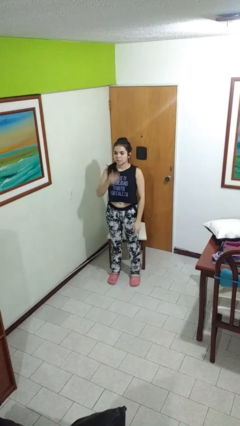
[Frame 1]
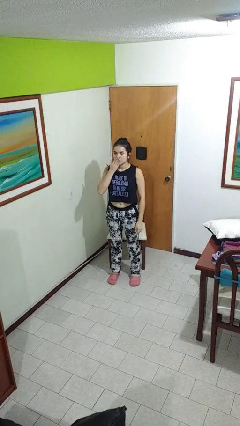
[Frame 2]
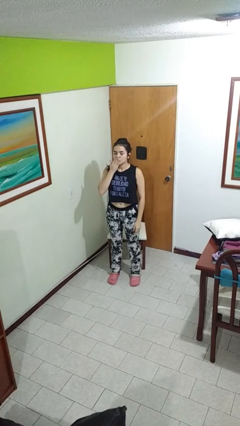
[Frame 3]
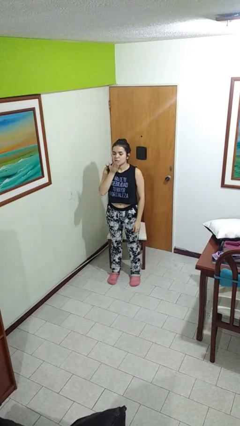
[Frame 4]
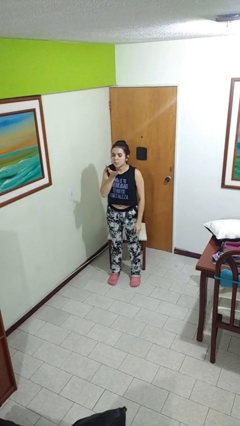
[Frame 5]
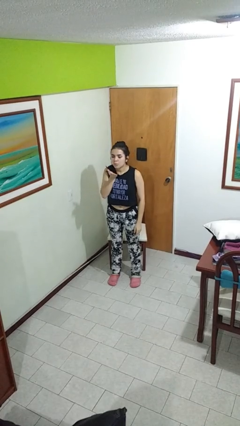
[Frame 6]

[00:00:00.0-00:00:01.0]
person gestures blow kiss

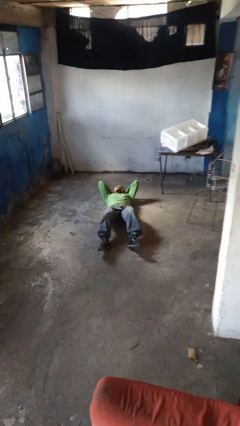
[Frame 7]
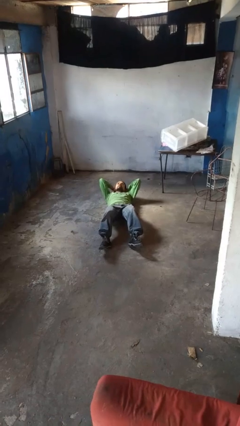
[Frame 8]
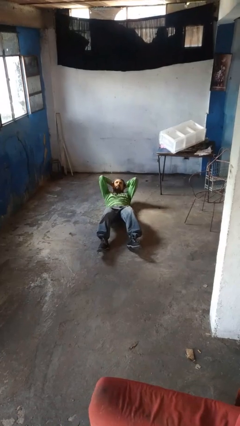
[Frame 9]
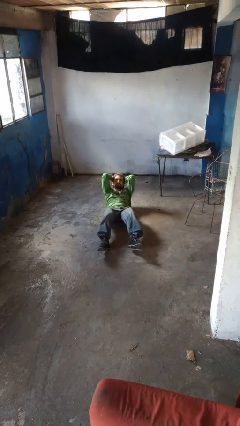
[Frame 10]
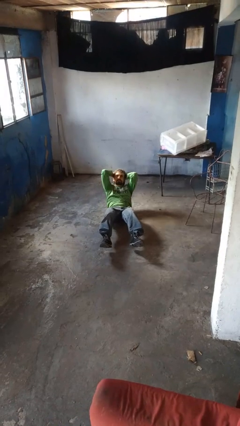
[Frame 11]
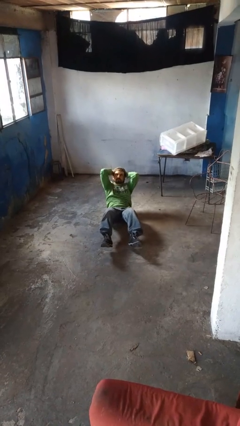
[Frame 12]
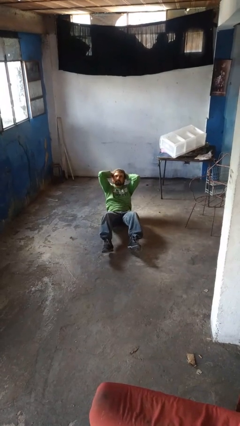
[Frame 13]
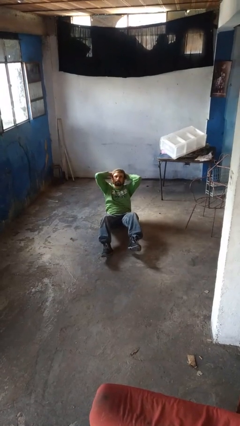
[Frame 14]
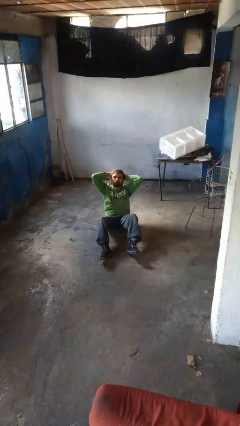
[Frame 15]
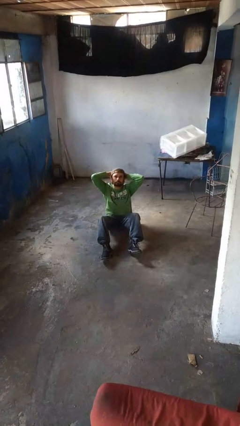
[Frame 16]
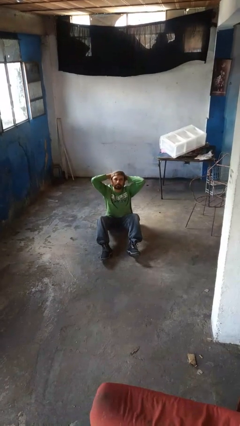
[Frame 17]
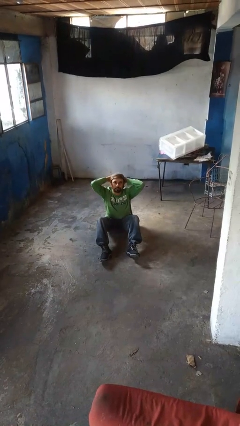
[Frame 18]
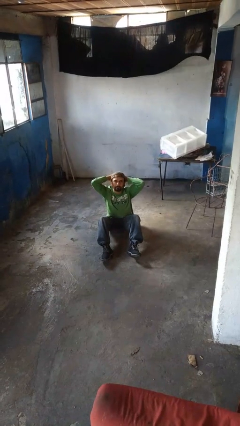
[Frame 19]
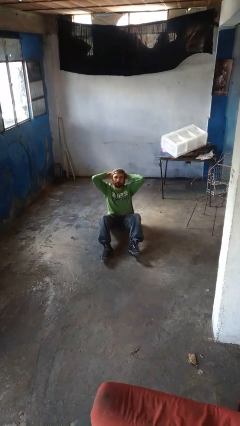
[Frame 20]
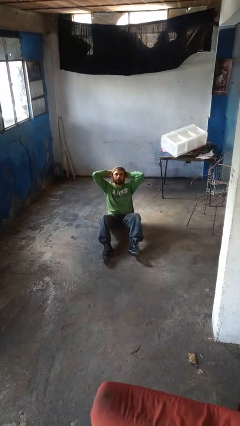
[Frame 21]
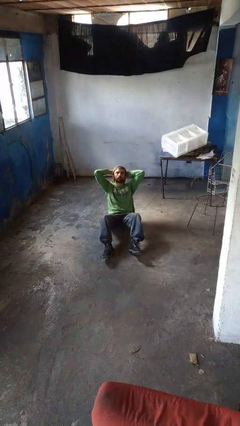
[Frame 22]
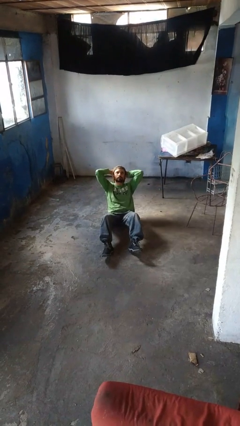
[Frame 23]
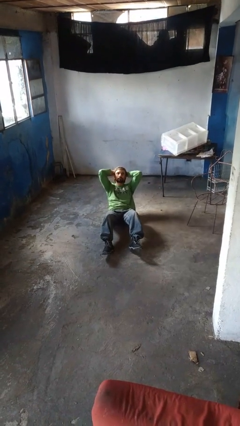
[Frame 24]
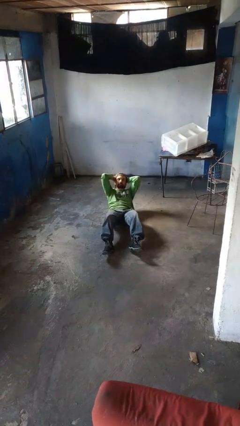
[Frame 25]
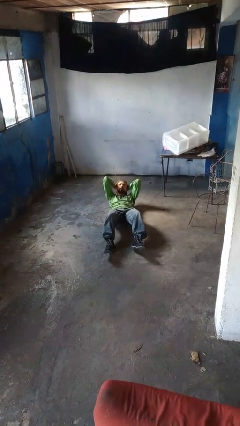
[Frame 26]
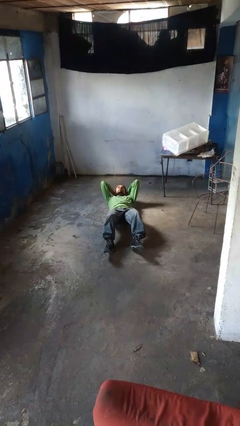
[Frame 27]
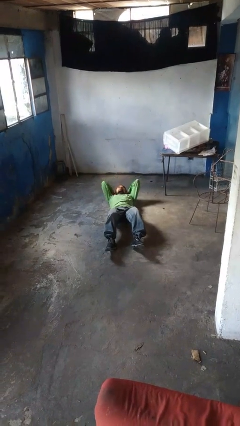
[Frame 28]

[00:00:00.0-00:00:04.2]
person exercises with situp

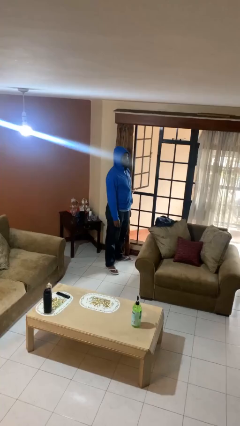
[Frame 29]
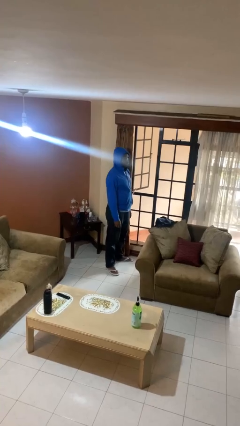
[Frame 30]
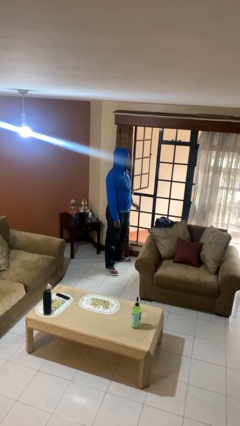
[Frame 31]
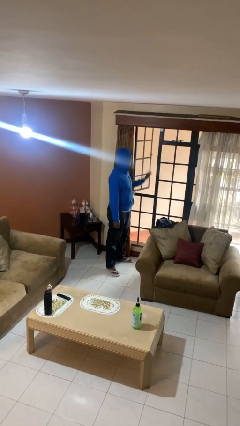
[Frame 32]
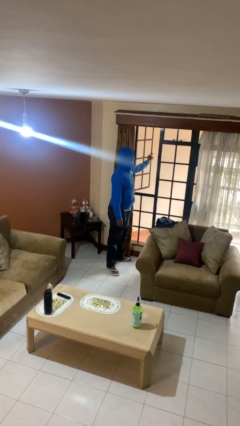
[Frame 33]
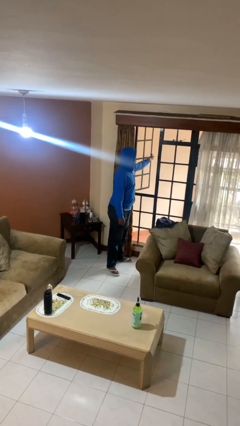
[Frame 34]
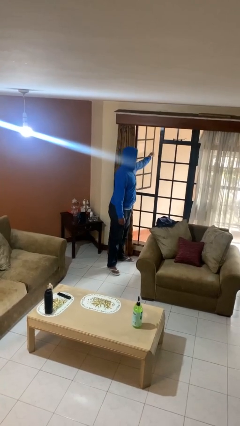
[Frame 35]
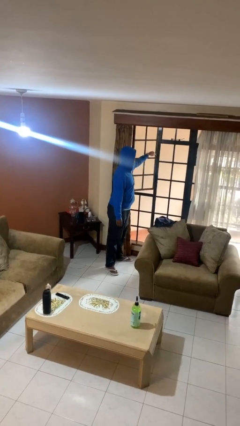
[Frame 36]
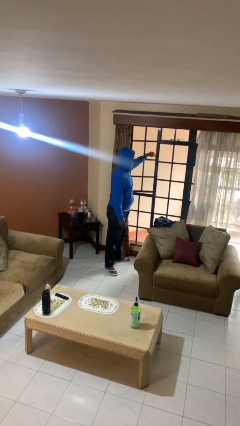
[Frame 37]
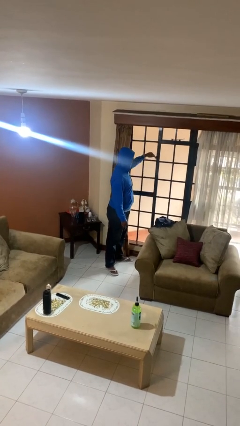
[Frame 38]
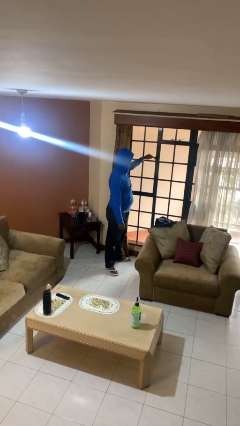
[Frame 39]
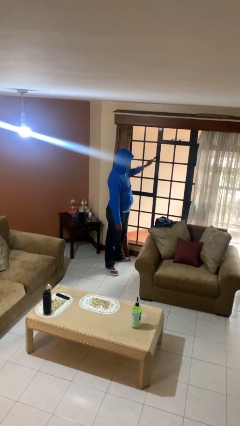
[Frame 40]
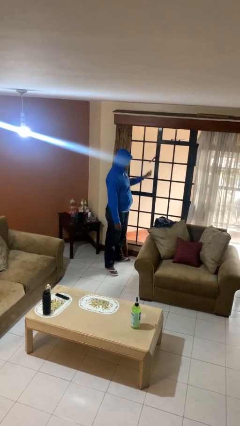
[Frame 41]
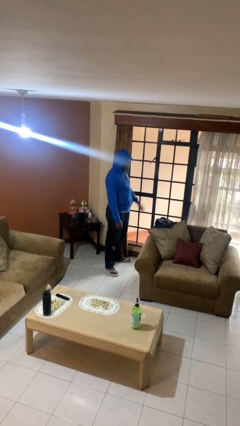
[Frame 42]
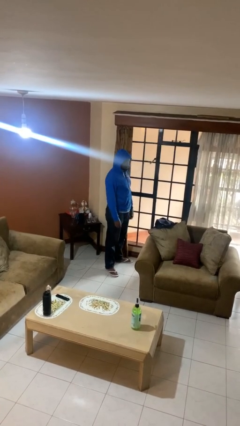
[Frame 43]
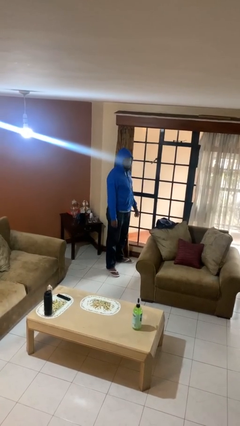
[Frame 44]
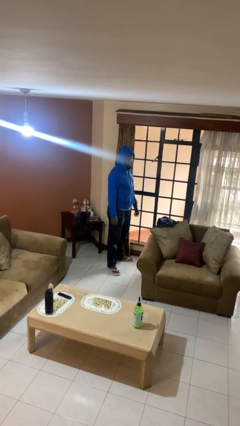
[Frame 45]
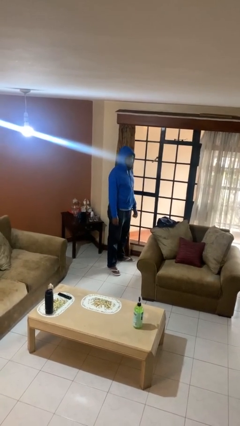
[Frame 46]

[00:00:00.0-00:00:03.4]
person closes home window

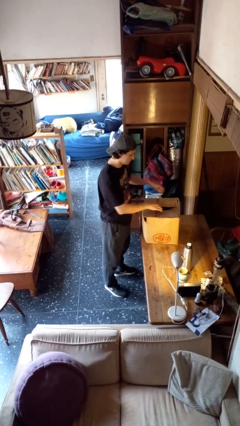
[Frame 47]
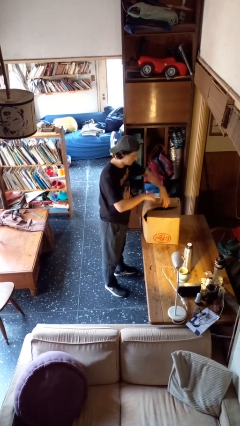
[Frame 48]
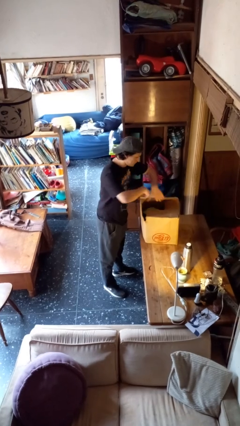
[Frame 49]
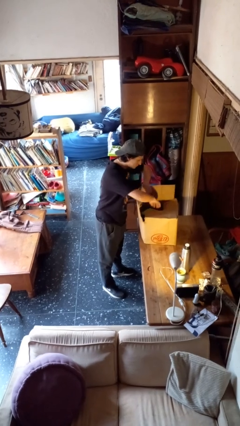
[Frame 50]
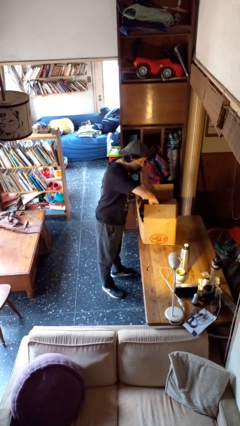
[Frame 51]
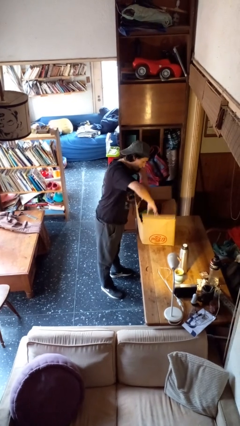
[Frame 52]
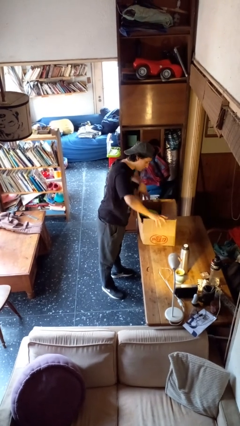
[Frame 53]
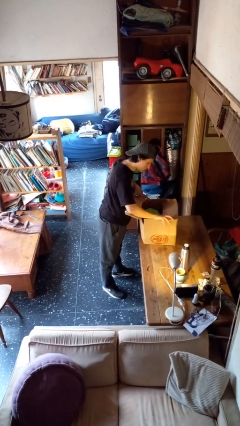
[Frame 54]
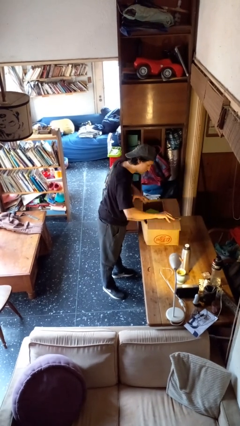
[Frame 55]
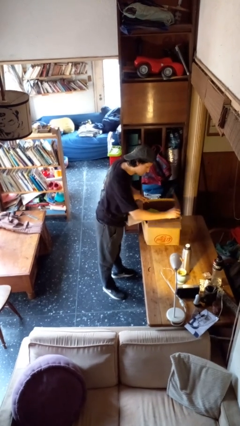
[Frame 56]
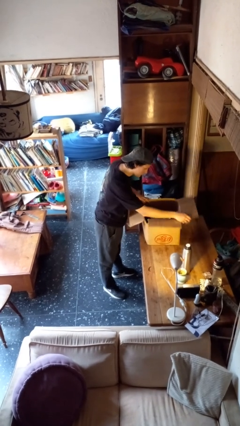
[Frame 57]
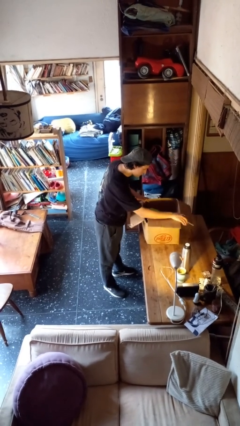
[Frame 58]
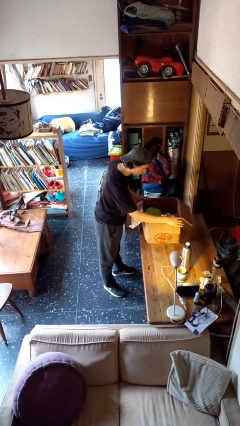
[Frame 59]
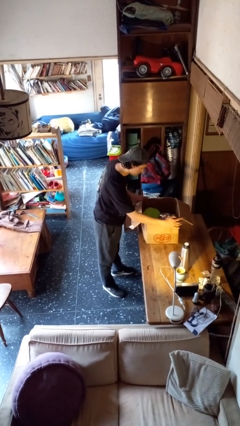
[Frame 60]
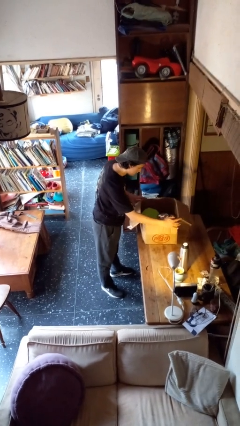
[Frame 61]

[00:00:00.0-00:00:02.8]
person opens box

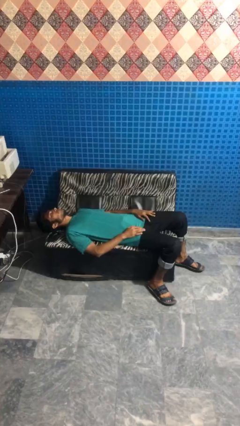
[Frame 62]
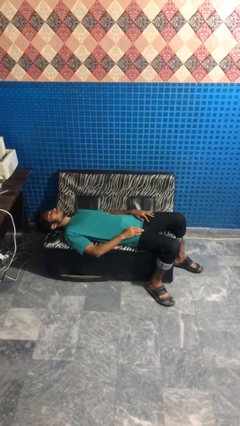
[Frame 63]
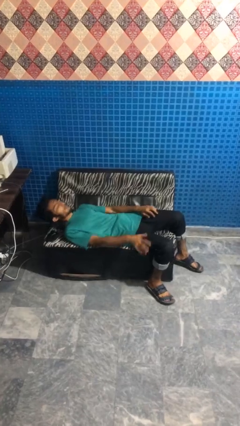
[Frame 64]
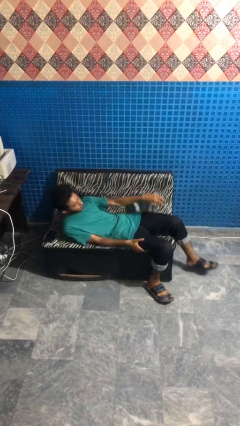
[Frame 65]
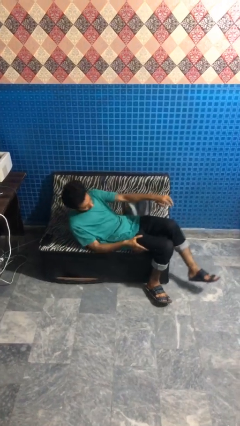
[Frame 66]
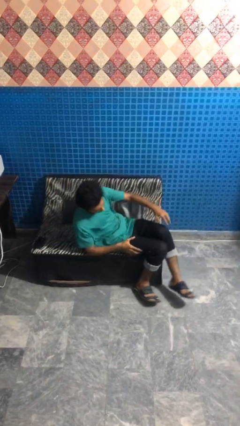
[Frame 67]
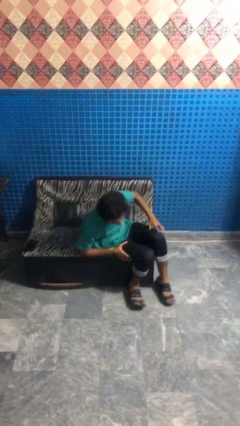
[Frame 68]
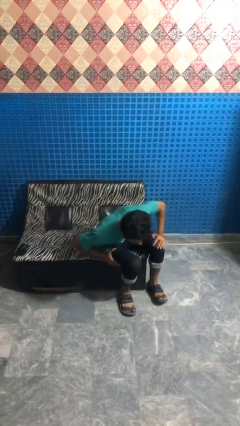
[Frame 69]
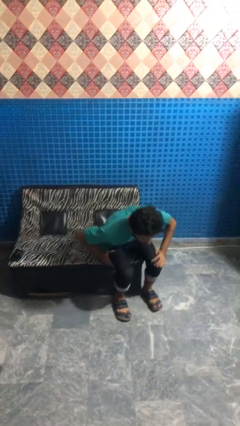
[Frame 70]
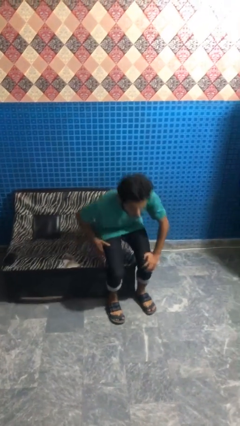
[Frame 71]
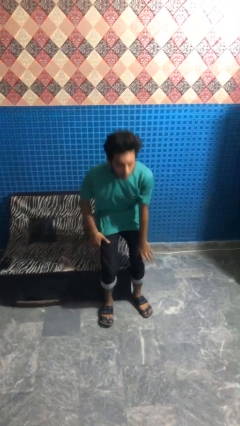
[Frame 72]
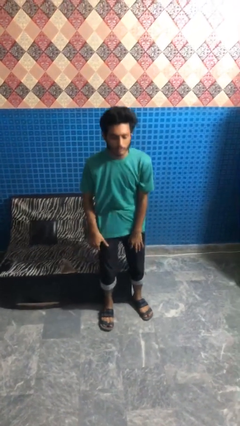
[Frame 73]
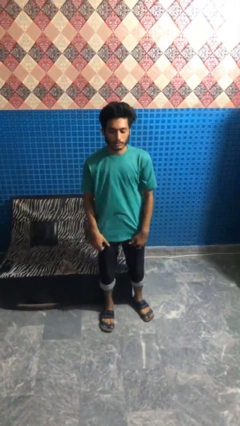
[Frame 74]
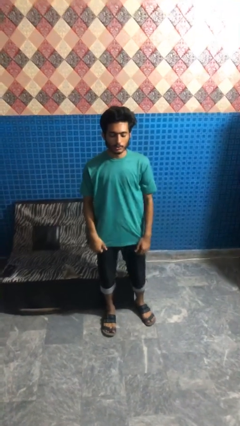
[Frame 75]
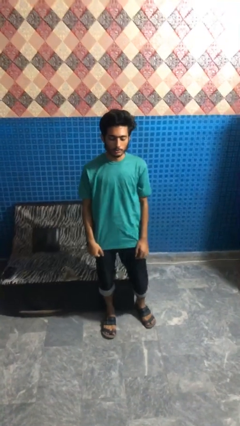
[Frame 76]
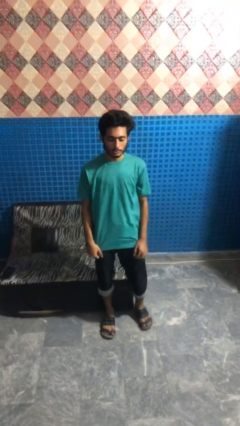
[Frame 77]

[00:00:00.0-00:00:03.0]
person stands up

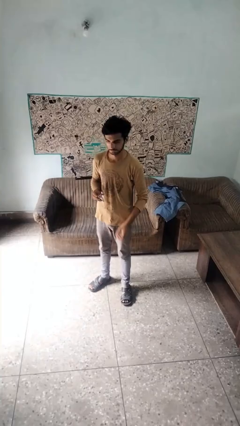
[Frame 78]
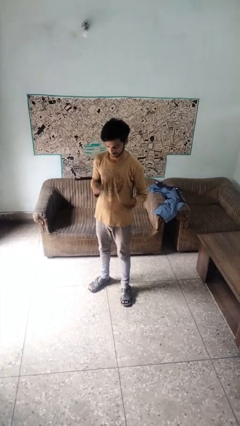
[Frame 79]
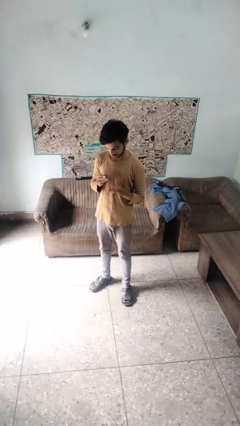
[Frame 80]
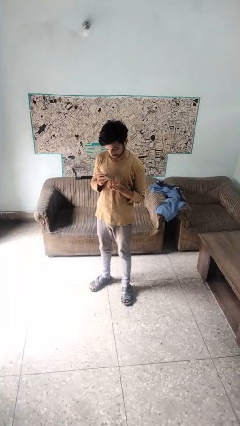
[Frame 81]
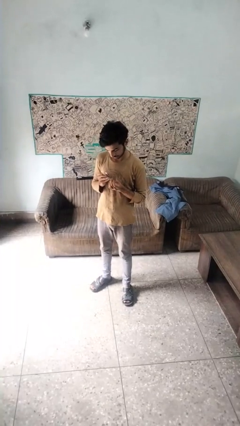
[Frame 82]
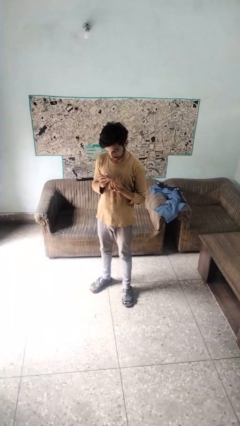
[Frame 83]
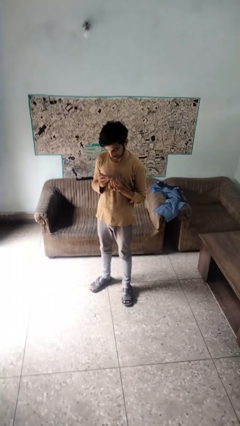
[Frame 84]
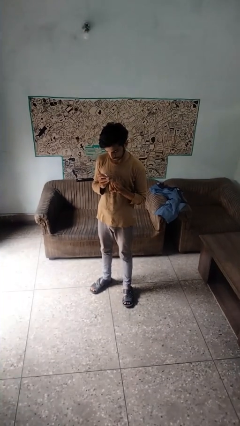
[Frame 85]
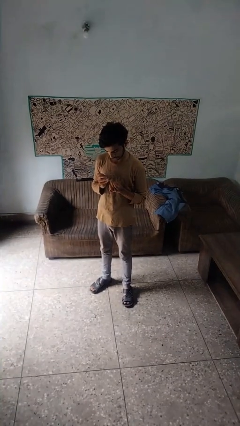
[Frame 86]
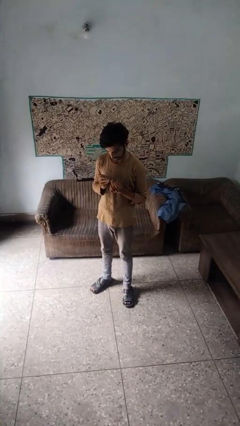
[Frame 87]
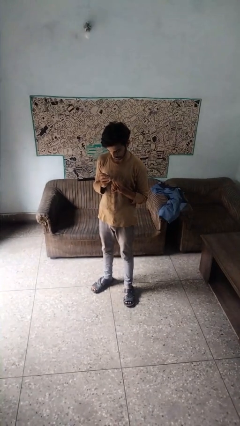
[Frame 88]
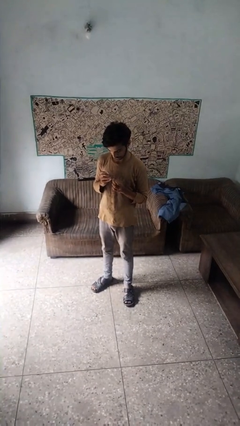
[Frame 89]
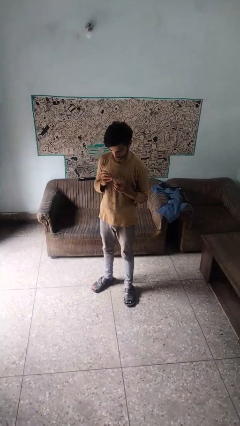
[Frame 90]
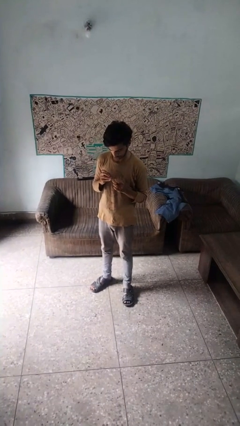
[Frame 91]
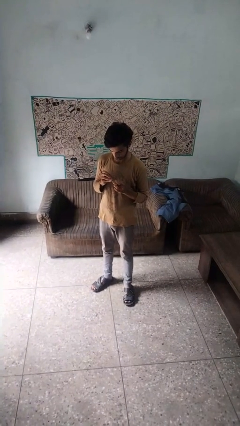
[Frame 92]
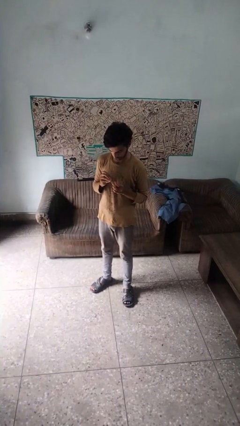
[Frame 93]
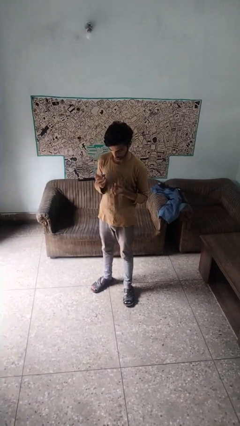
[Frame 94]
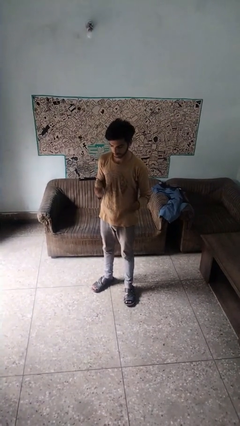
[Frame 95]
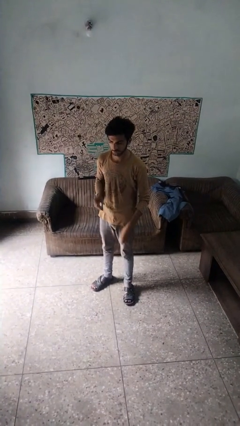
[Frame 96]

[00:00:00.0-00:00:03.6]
person clips fingernails
